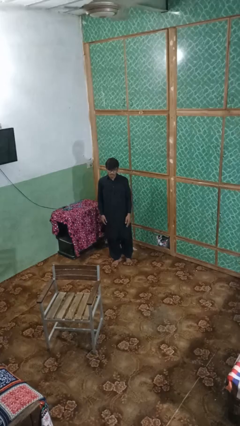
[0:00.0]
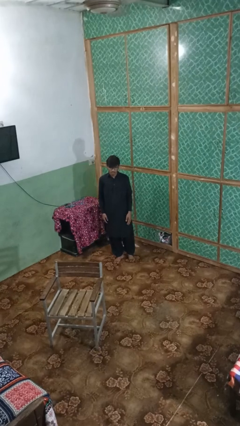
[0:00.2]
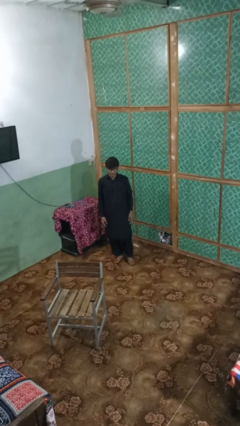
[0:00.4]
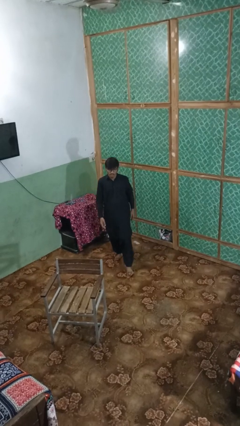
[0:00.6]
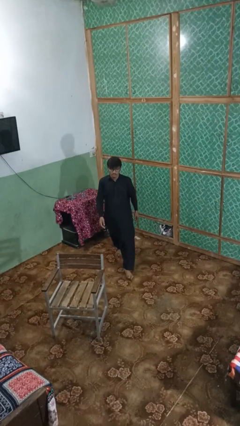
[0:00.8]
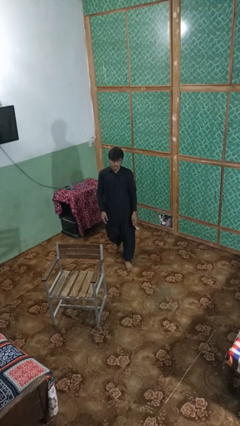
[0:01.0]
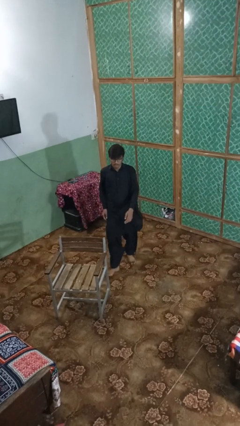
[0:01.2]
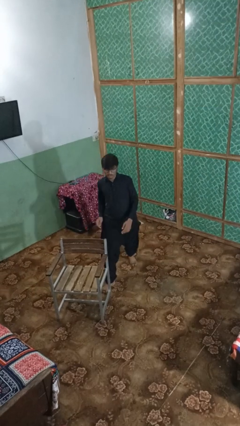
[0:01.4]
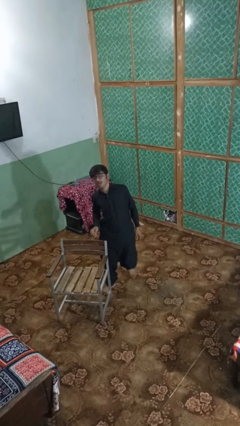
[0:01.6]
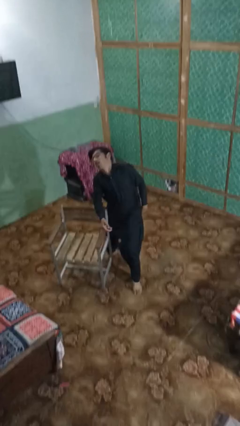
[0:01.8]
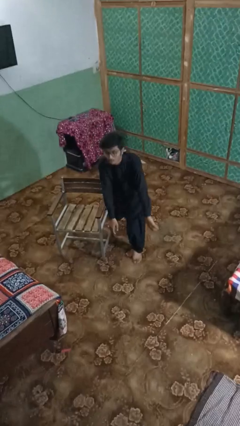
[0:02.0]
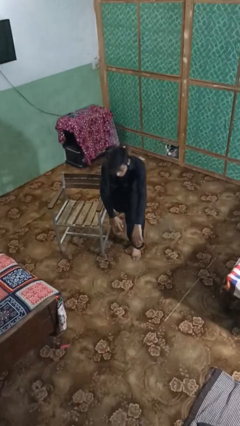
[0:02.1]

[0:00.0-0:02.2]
person trips on object on floor

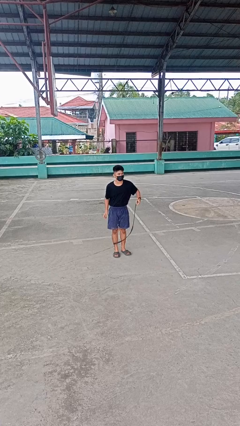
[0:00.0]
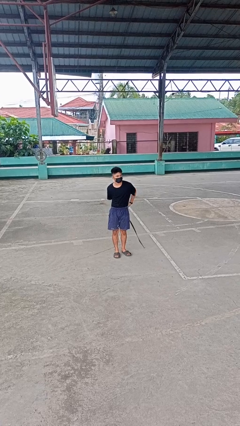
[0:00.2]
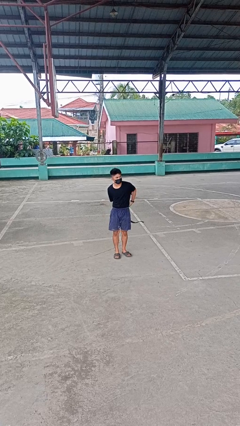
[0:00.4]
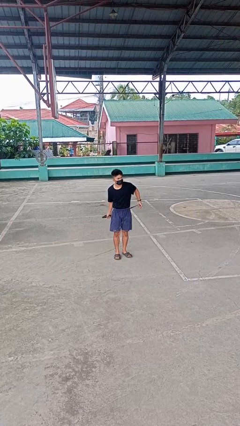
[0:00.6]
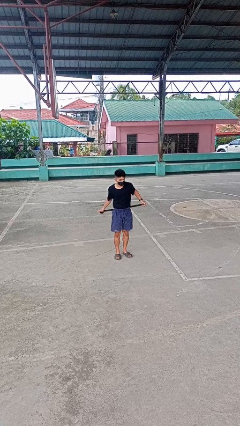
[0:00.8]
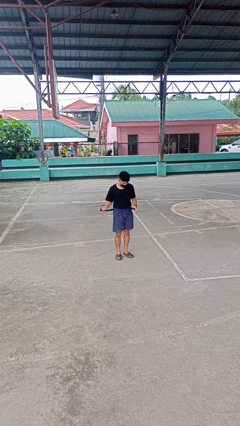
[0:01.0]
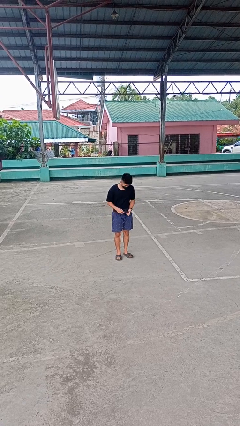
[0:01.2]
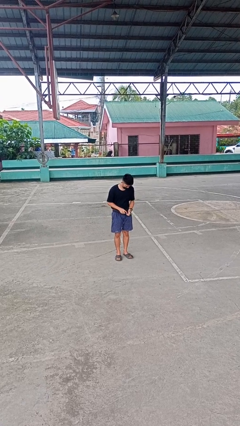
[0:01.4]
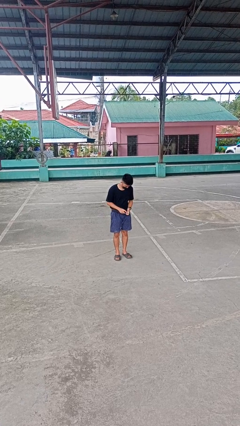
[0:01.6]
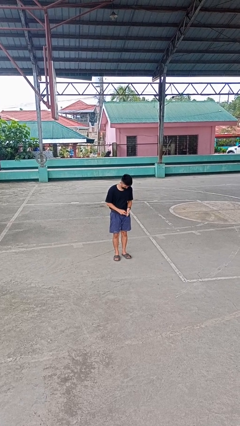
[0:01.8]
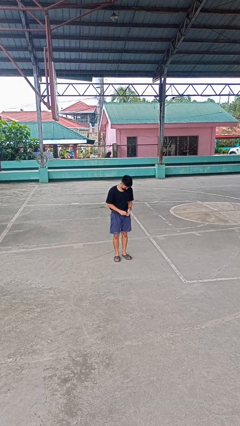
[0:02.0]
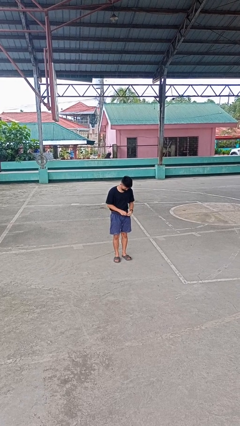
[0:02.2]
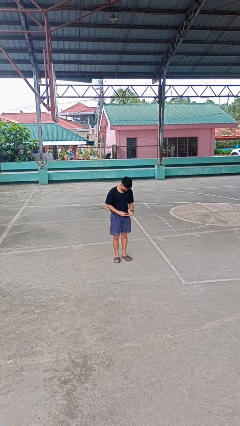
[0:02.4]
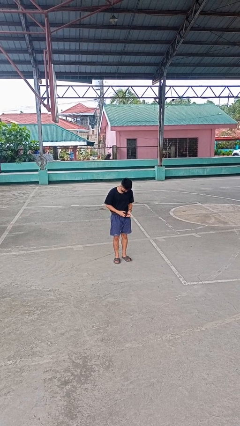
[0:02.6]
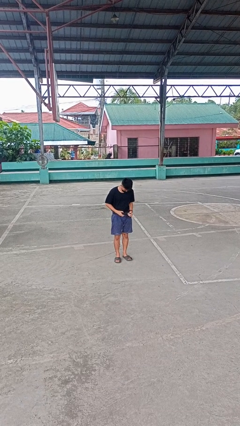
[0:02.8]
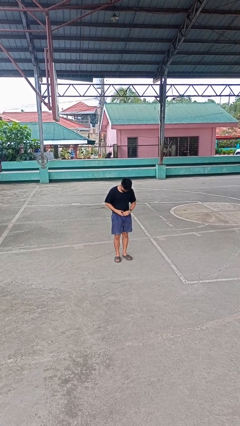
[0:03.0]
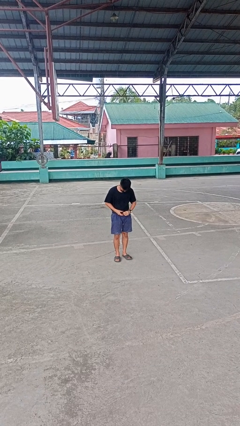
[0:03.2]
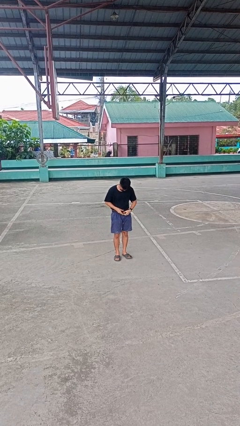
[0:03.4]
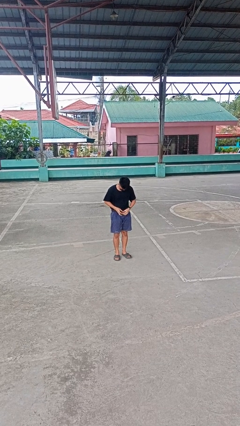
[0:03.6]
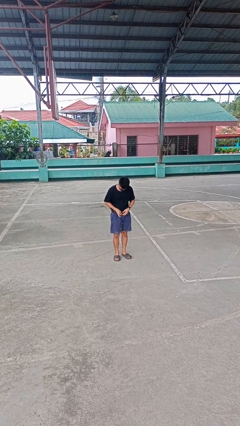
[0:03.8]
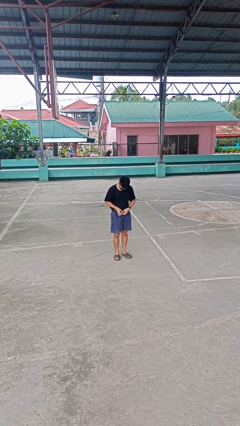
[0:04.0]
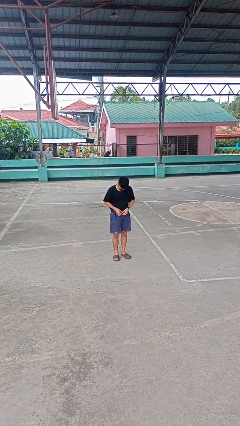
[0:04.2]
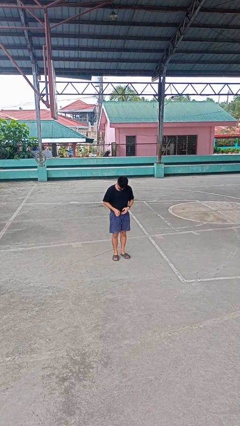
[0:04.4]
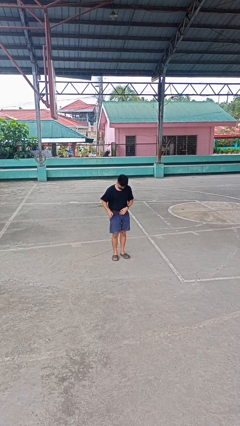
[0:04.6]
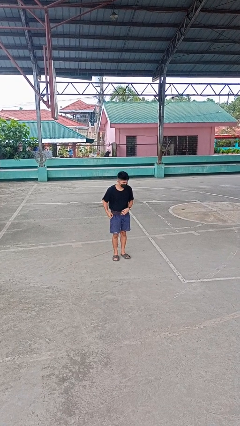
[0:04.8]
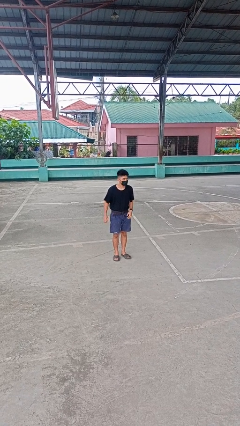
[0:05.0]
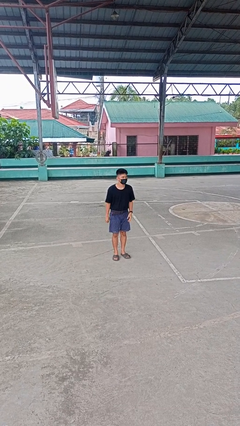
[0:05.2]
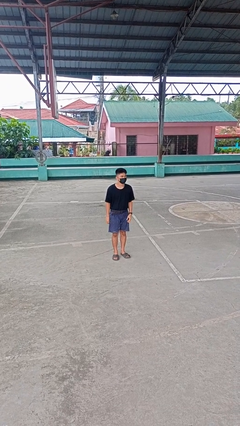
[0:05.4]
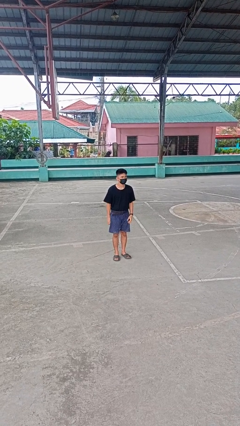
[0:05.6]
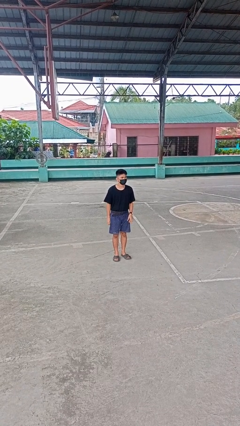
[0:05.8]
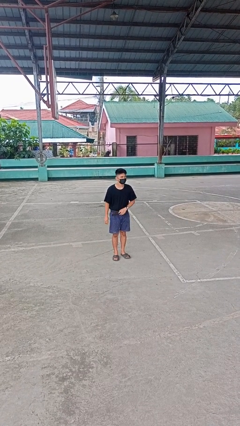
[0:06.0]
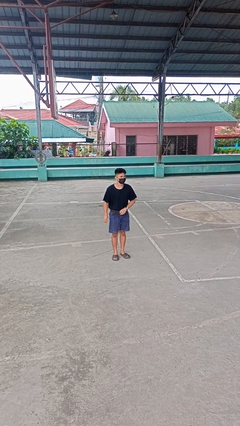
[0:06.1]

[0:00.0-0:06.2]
person puts on belt

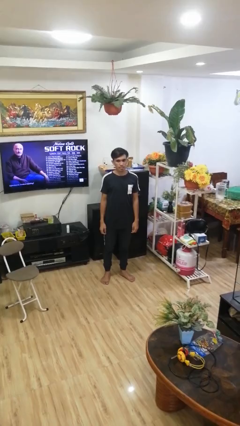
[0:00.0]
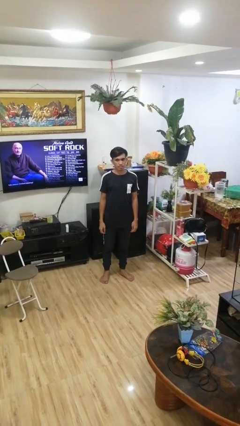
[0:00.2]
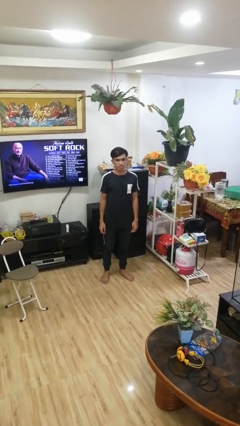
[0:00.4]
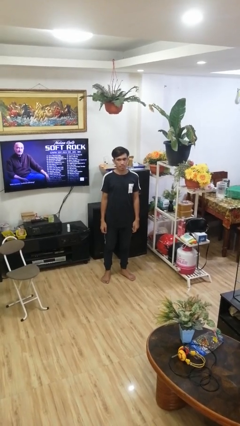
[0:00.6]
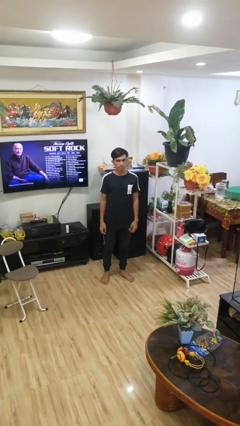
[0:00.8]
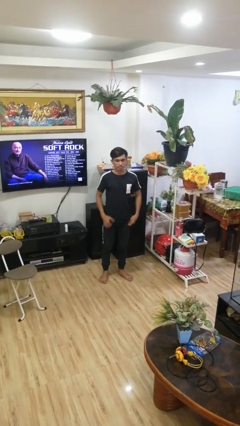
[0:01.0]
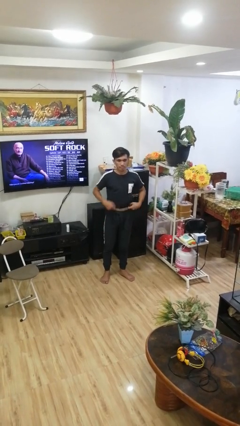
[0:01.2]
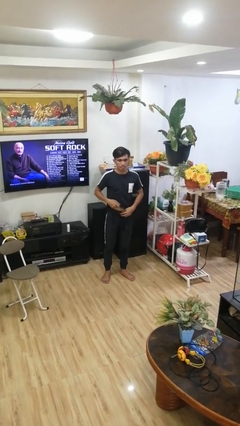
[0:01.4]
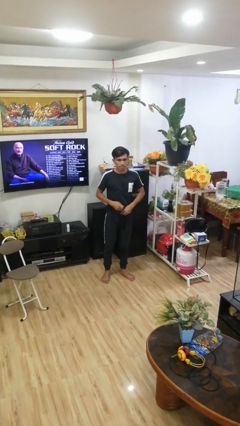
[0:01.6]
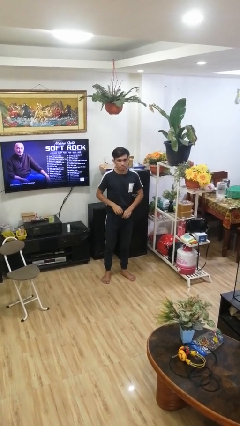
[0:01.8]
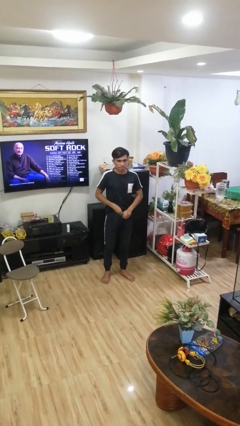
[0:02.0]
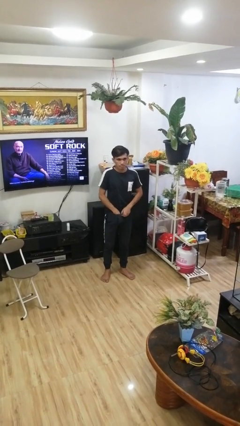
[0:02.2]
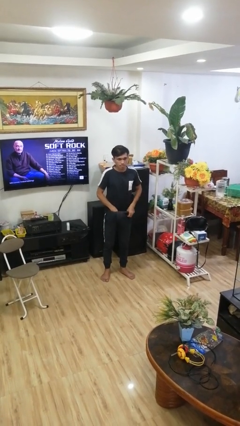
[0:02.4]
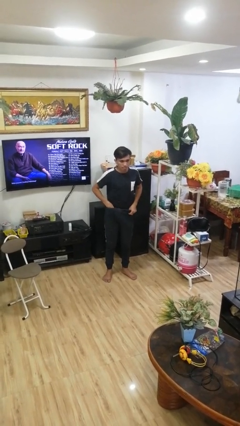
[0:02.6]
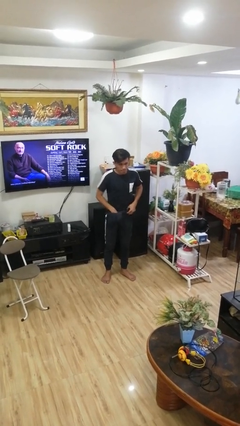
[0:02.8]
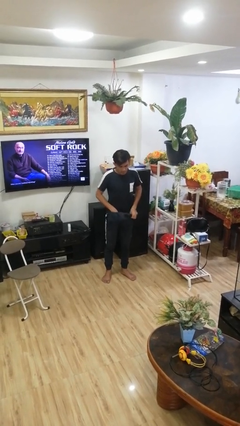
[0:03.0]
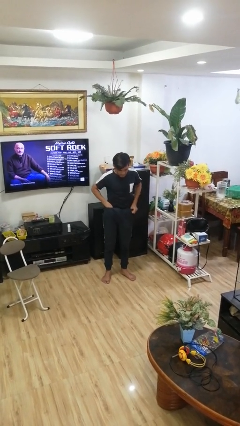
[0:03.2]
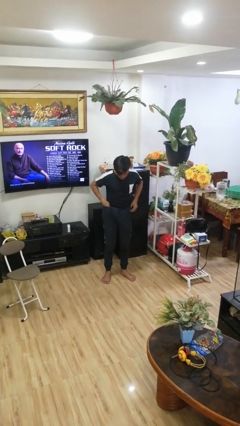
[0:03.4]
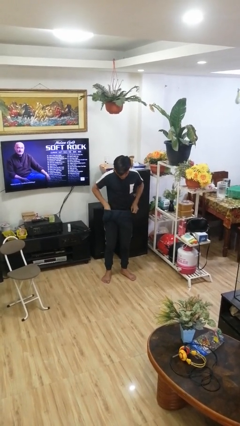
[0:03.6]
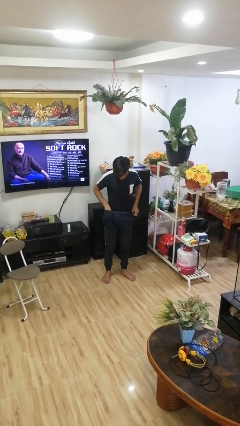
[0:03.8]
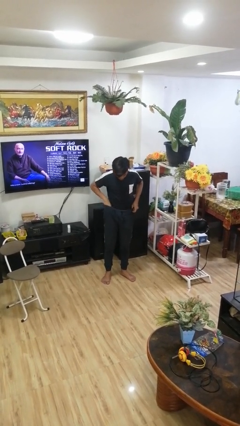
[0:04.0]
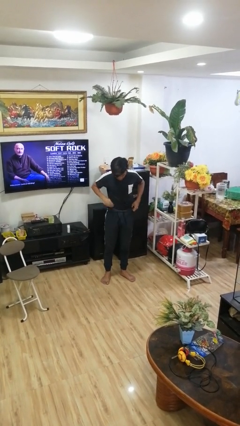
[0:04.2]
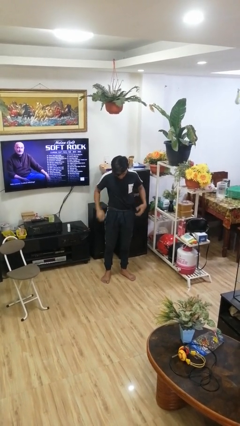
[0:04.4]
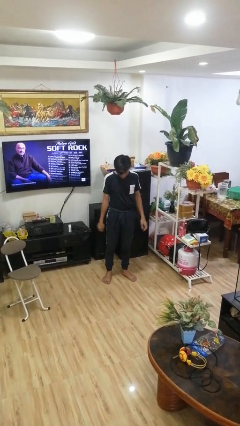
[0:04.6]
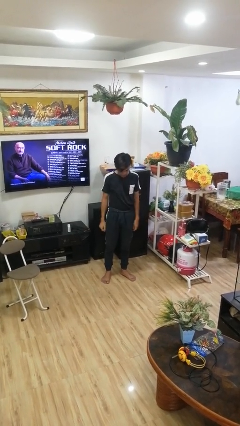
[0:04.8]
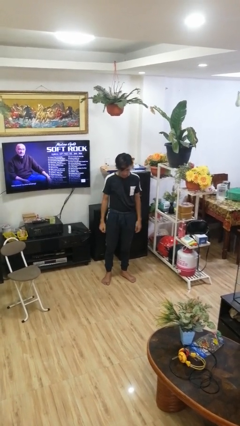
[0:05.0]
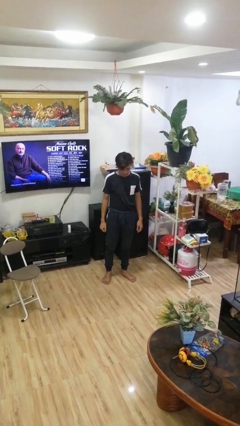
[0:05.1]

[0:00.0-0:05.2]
person tucks in shirt

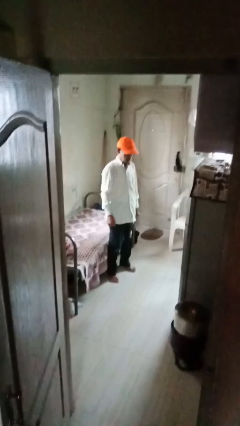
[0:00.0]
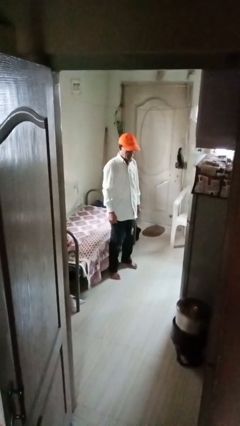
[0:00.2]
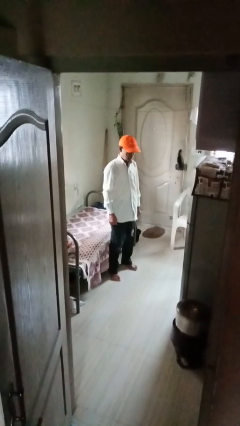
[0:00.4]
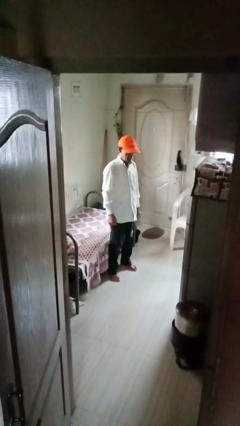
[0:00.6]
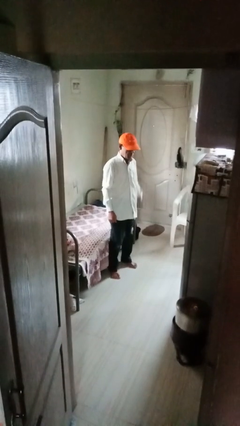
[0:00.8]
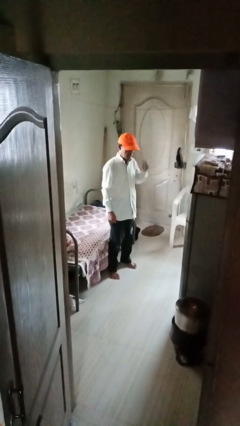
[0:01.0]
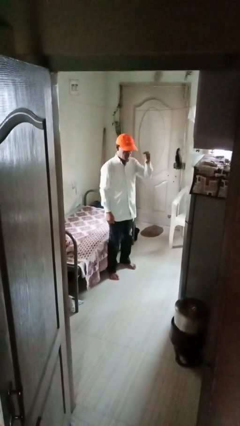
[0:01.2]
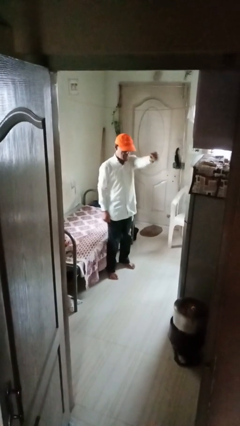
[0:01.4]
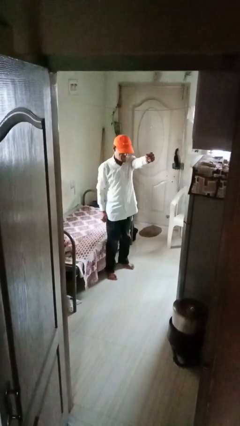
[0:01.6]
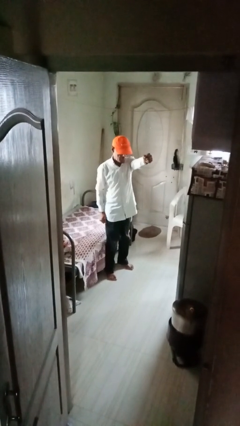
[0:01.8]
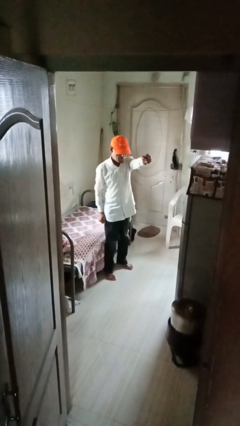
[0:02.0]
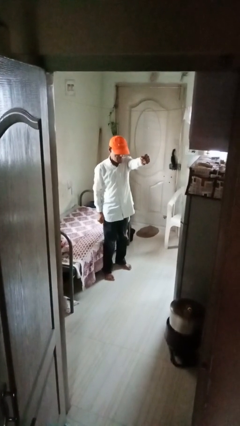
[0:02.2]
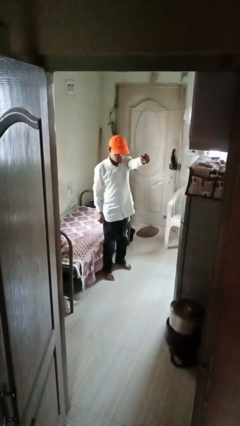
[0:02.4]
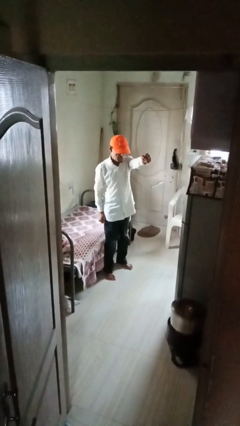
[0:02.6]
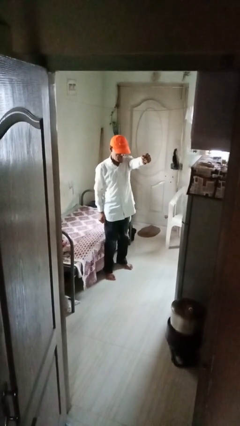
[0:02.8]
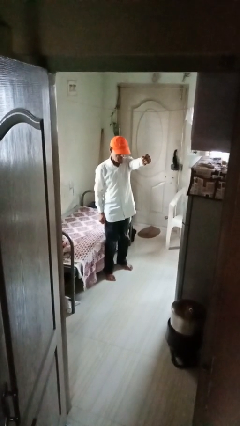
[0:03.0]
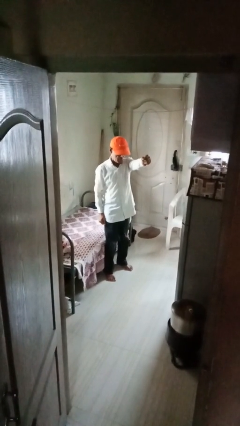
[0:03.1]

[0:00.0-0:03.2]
person punches

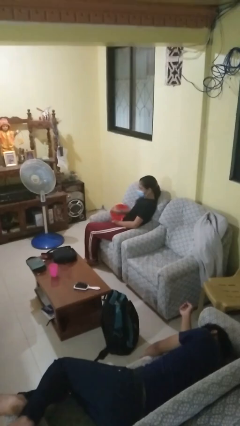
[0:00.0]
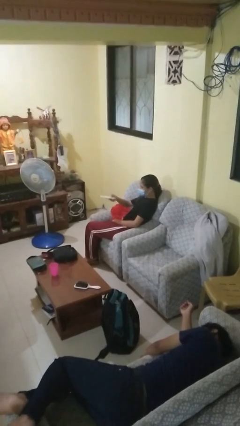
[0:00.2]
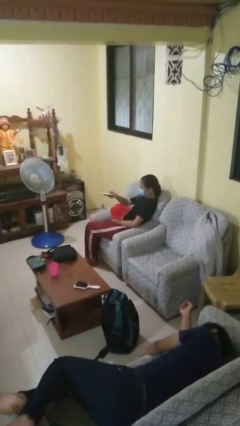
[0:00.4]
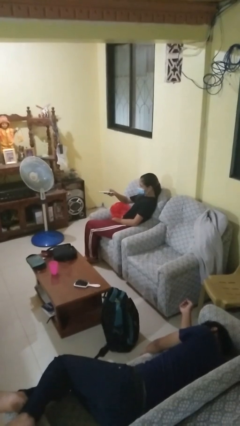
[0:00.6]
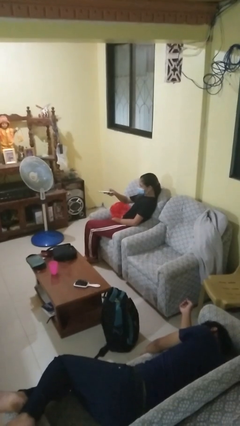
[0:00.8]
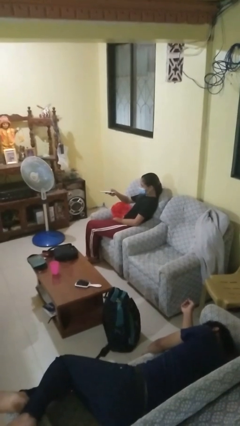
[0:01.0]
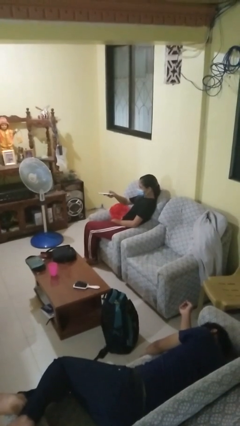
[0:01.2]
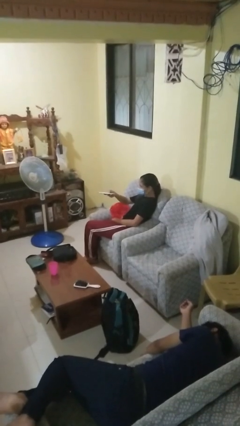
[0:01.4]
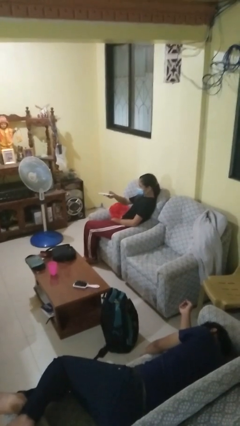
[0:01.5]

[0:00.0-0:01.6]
person uses television remote
